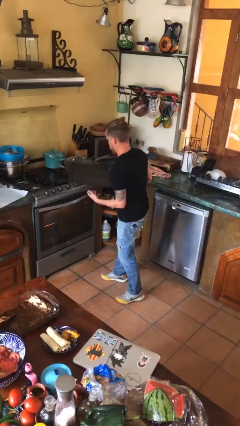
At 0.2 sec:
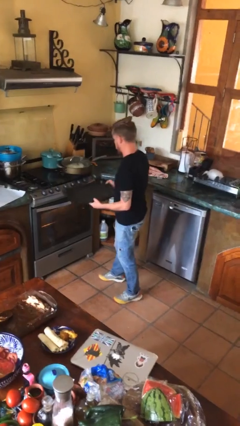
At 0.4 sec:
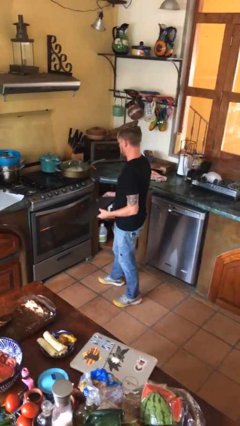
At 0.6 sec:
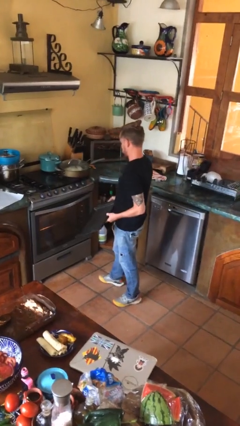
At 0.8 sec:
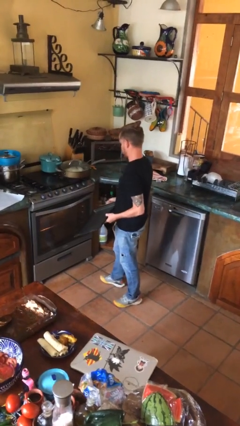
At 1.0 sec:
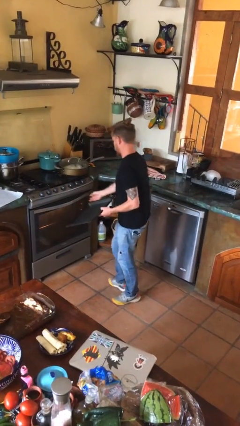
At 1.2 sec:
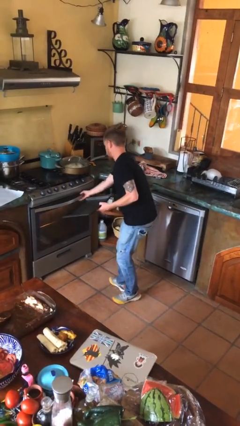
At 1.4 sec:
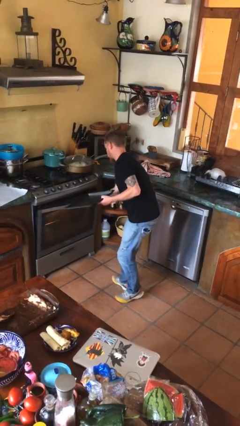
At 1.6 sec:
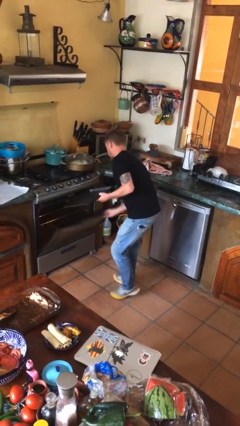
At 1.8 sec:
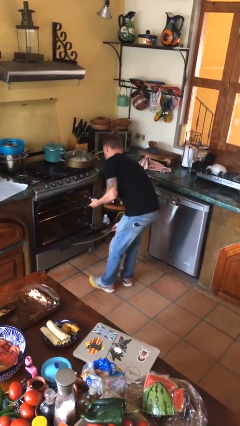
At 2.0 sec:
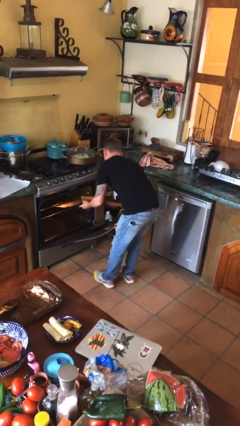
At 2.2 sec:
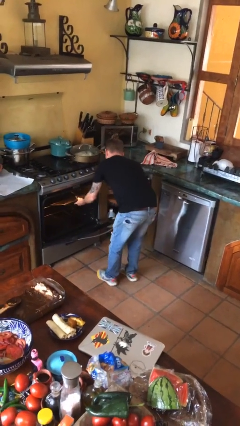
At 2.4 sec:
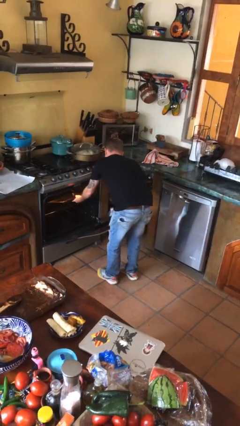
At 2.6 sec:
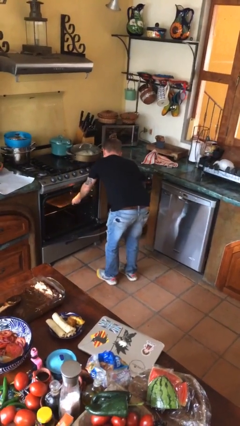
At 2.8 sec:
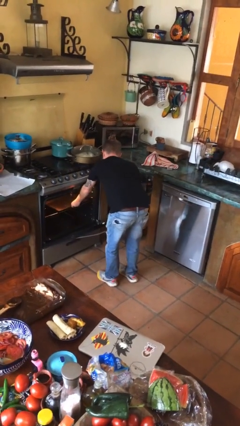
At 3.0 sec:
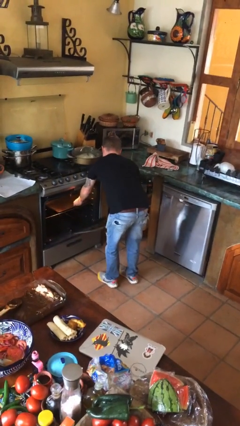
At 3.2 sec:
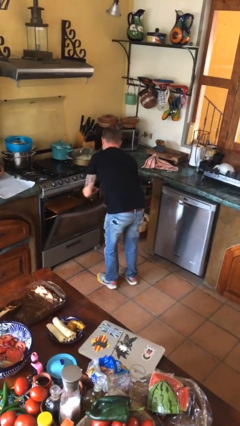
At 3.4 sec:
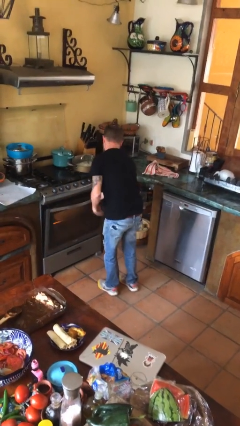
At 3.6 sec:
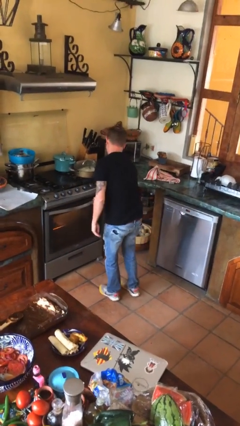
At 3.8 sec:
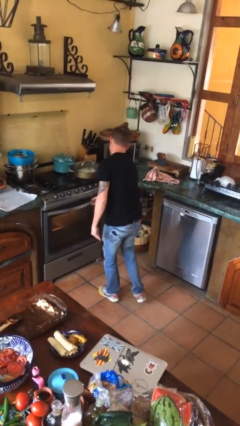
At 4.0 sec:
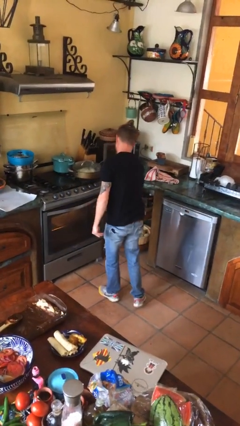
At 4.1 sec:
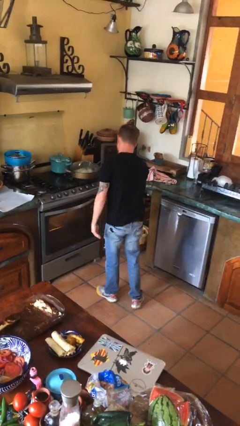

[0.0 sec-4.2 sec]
person puts object into oven

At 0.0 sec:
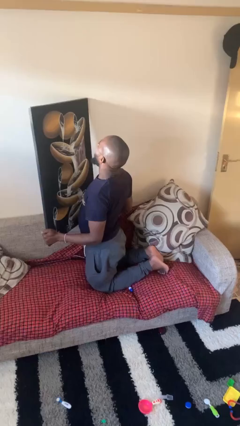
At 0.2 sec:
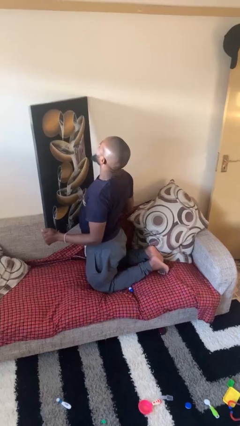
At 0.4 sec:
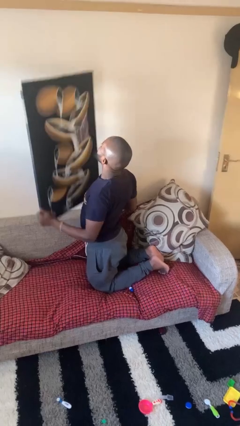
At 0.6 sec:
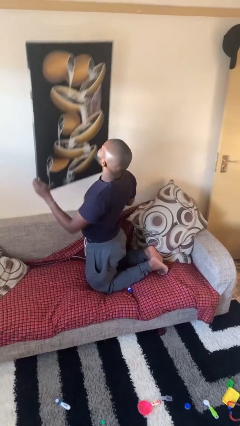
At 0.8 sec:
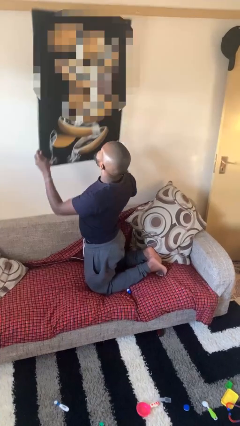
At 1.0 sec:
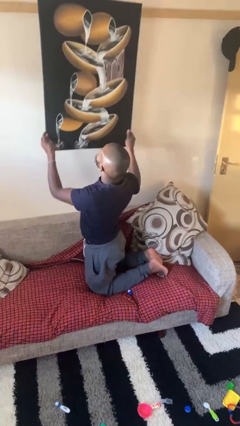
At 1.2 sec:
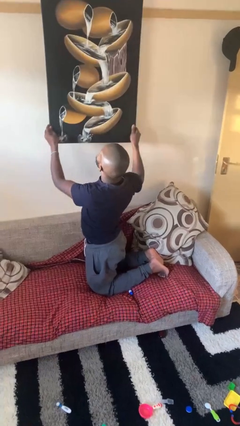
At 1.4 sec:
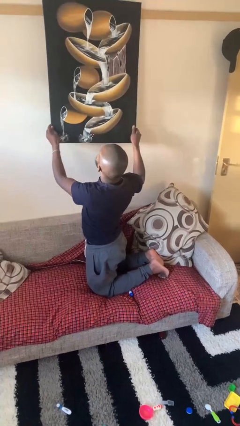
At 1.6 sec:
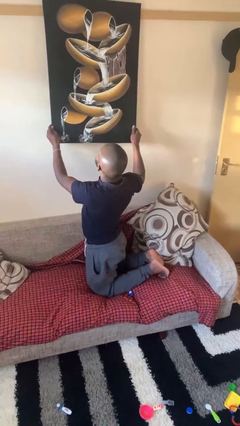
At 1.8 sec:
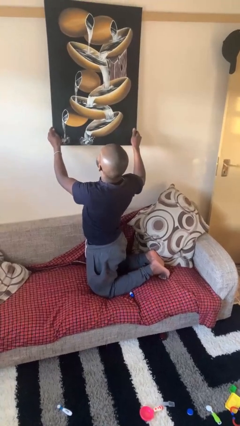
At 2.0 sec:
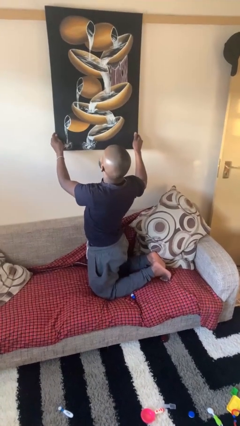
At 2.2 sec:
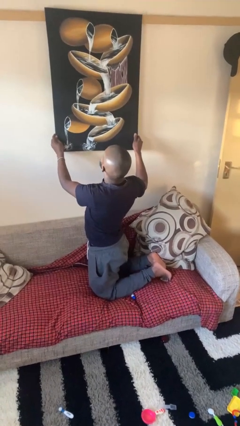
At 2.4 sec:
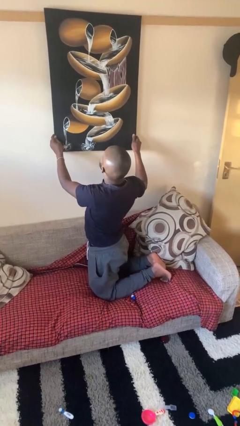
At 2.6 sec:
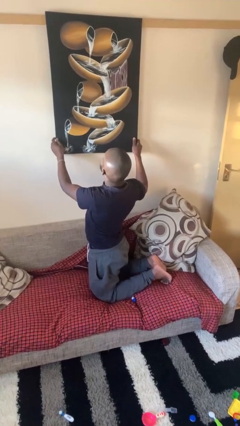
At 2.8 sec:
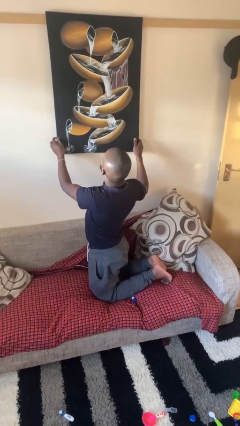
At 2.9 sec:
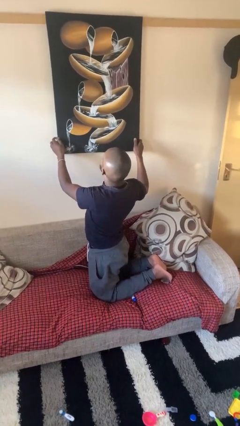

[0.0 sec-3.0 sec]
person puts up picture frame

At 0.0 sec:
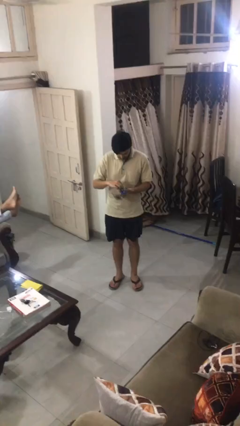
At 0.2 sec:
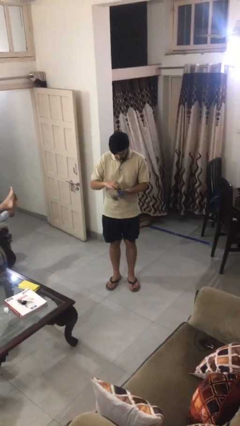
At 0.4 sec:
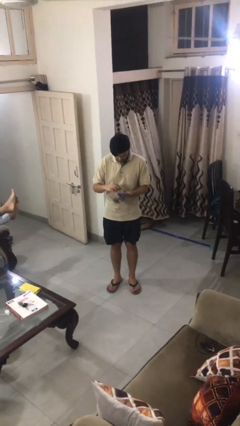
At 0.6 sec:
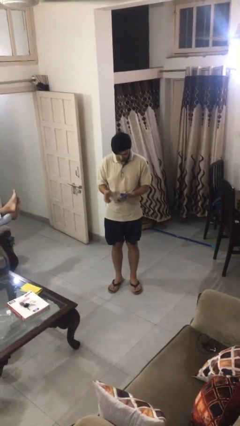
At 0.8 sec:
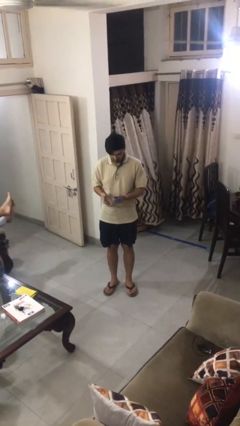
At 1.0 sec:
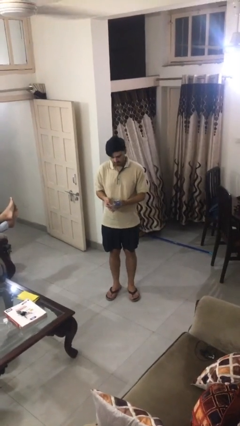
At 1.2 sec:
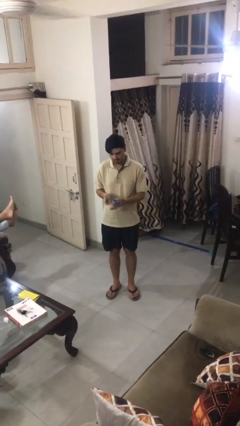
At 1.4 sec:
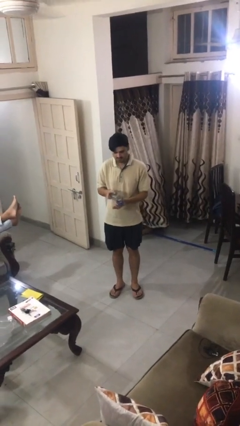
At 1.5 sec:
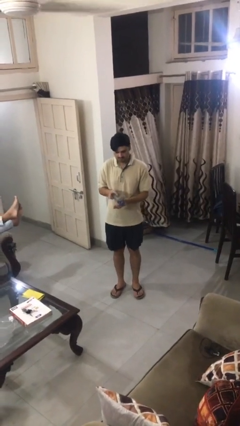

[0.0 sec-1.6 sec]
person closes jewelry box

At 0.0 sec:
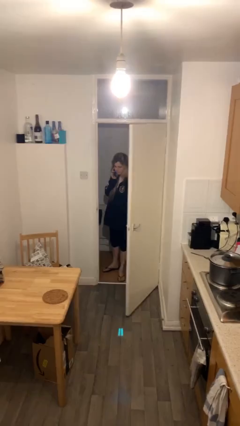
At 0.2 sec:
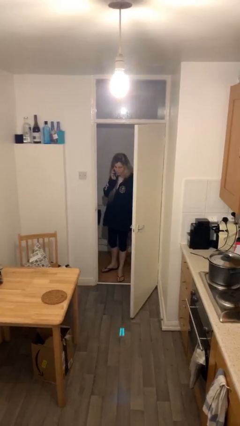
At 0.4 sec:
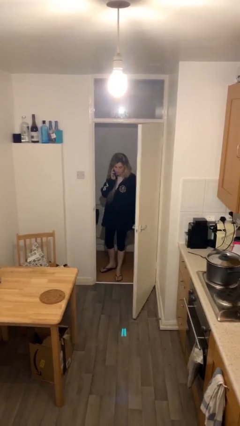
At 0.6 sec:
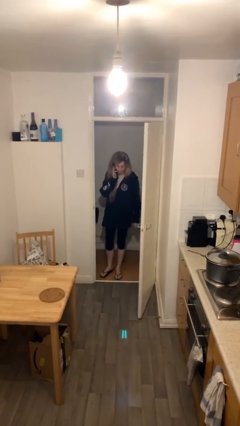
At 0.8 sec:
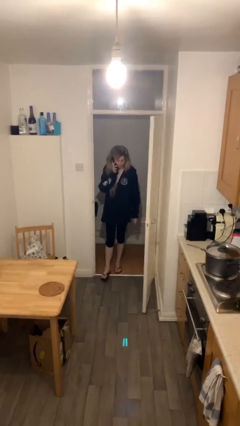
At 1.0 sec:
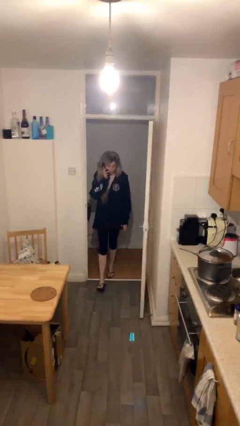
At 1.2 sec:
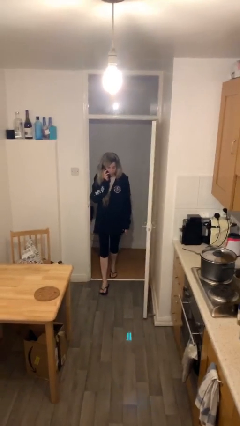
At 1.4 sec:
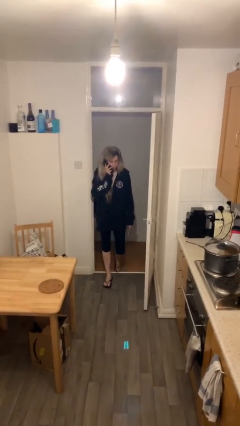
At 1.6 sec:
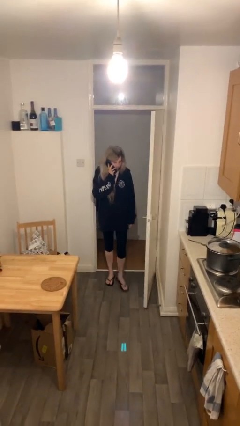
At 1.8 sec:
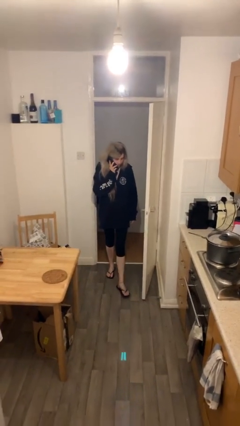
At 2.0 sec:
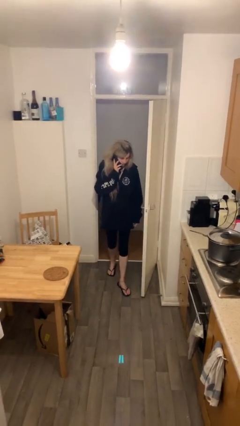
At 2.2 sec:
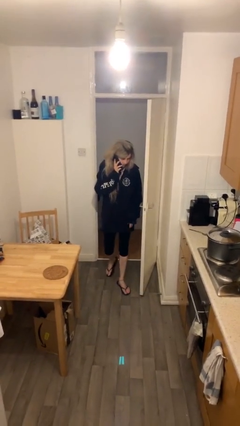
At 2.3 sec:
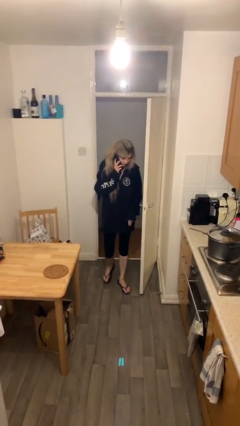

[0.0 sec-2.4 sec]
person enters scene through structure

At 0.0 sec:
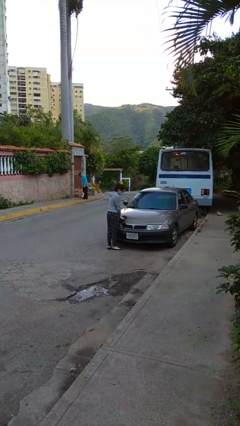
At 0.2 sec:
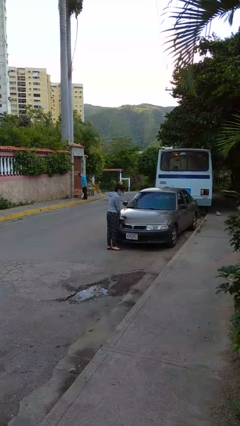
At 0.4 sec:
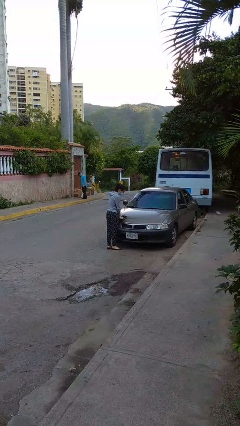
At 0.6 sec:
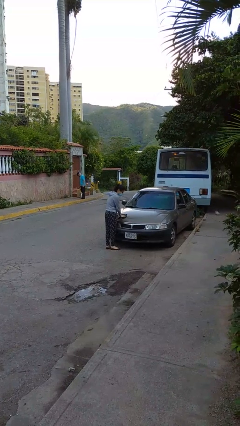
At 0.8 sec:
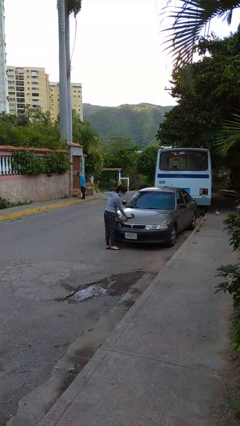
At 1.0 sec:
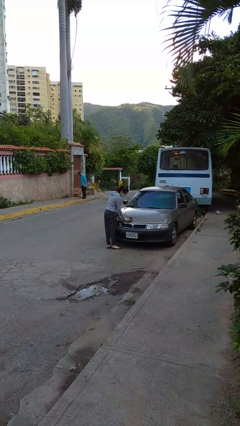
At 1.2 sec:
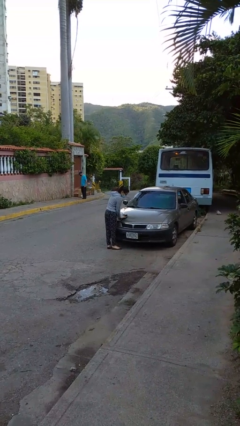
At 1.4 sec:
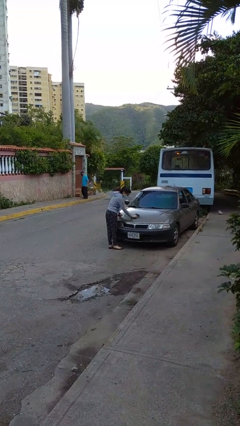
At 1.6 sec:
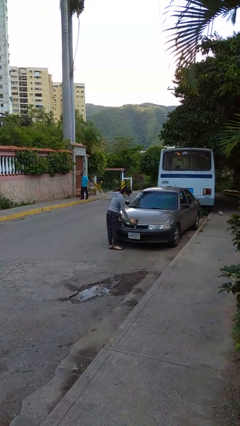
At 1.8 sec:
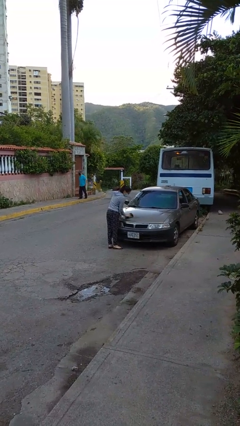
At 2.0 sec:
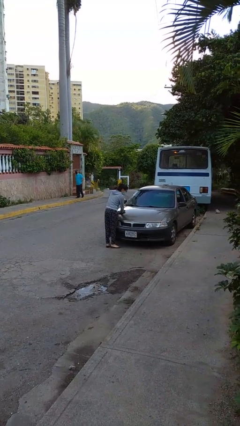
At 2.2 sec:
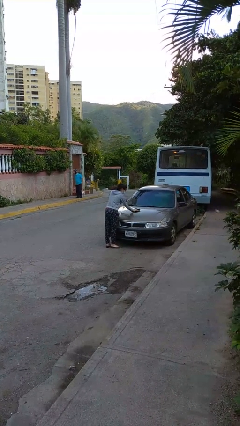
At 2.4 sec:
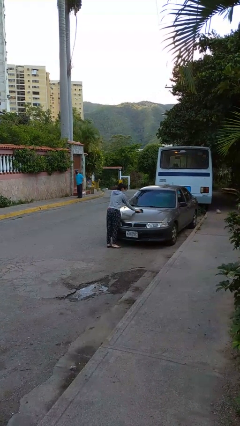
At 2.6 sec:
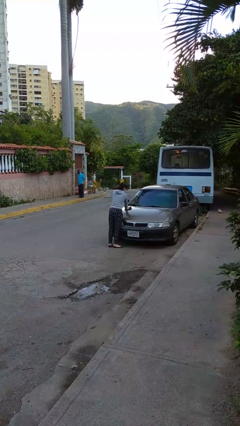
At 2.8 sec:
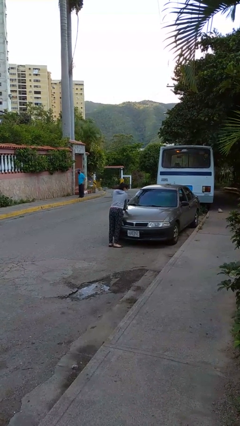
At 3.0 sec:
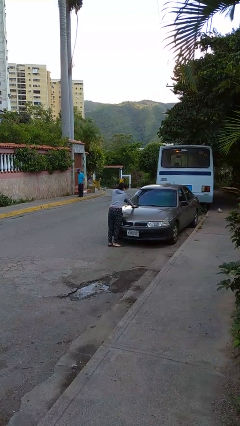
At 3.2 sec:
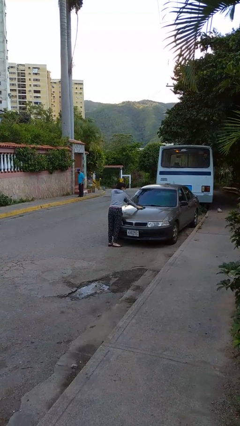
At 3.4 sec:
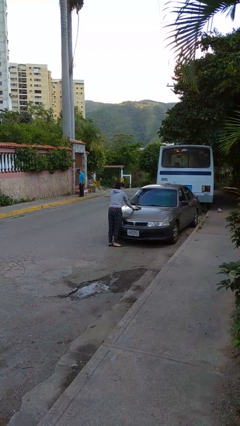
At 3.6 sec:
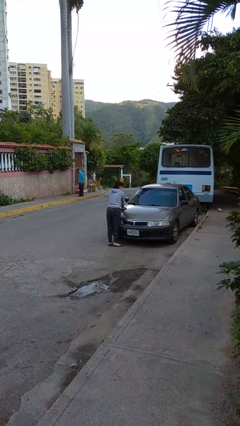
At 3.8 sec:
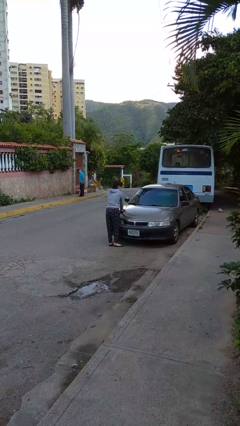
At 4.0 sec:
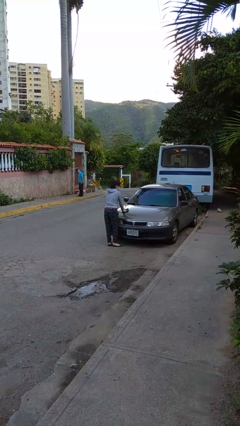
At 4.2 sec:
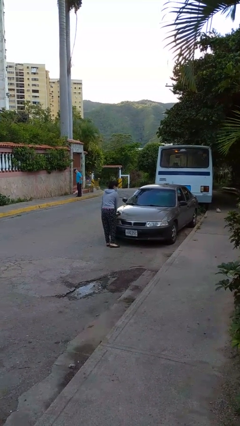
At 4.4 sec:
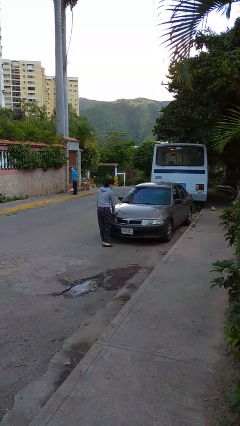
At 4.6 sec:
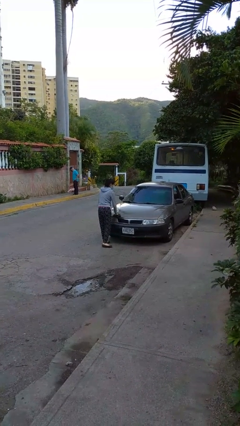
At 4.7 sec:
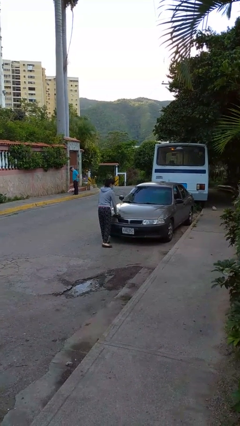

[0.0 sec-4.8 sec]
person polishes car with rag

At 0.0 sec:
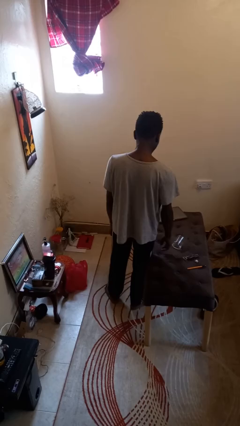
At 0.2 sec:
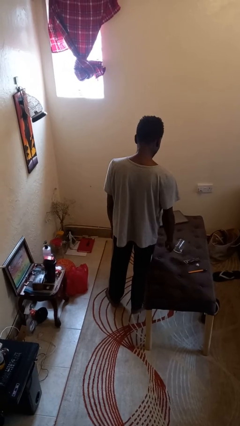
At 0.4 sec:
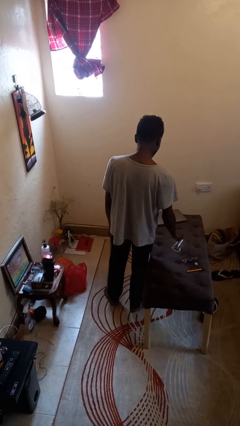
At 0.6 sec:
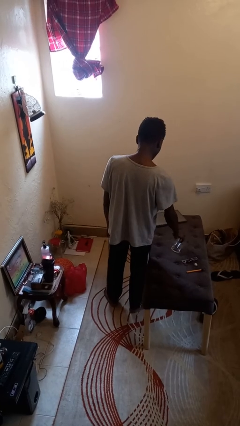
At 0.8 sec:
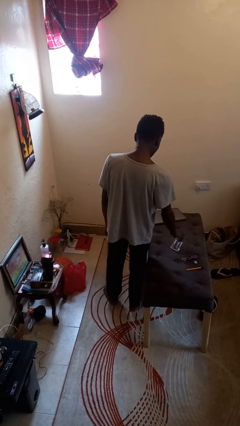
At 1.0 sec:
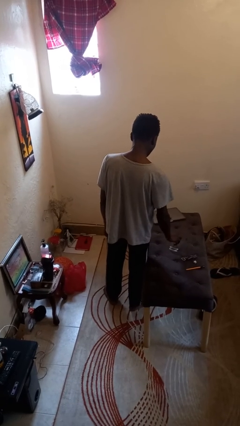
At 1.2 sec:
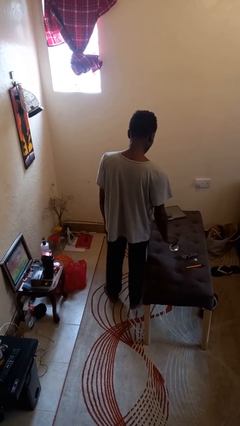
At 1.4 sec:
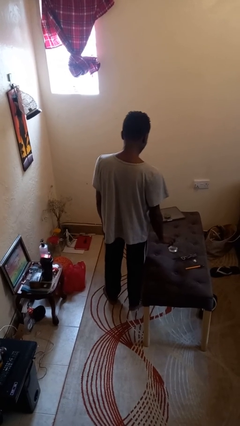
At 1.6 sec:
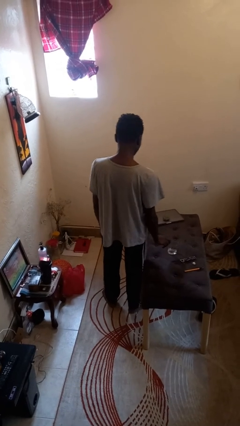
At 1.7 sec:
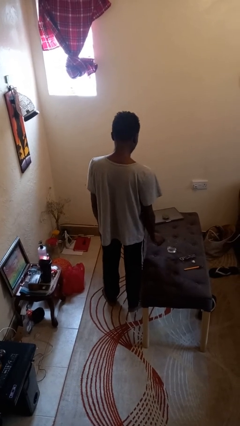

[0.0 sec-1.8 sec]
person sets upright glass
